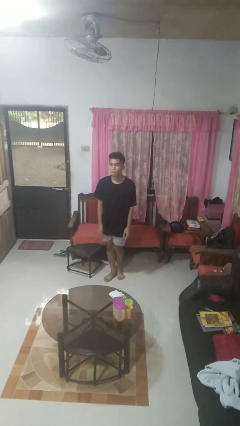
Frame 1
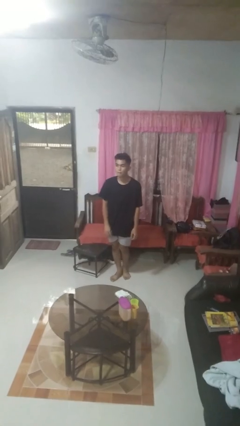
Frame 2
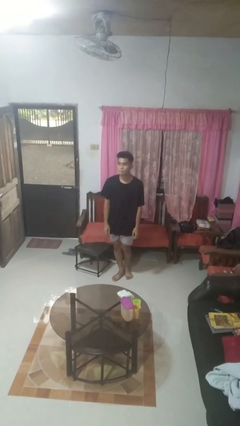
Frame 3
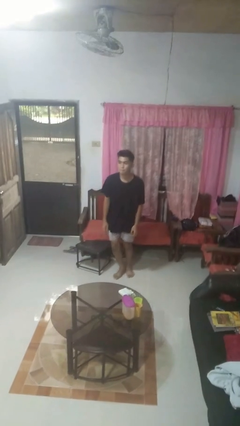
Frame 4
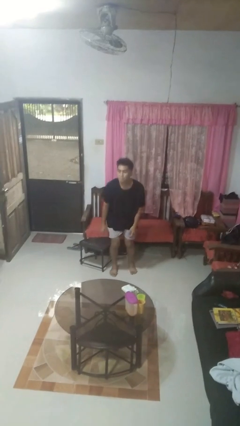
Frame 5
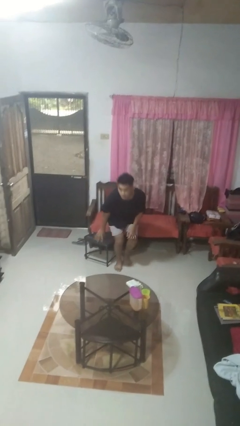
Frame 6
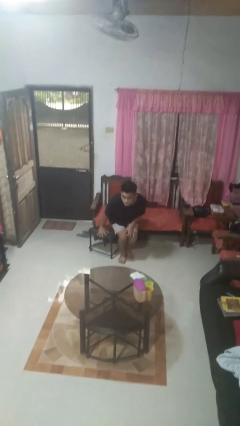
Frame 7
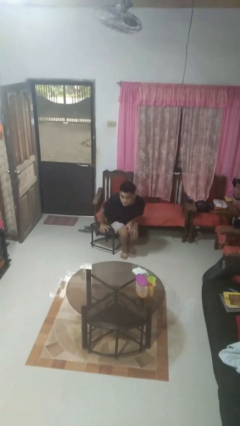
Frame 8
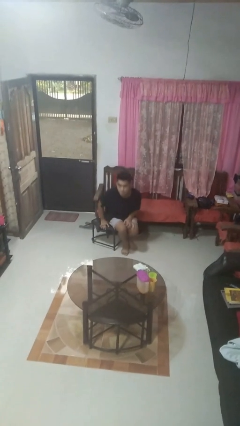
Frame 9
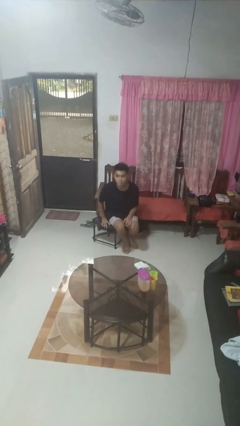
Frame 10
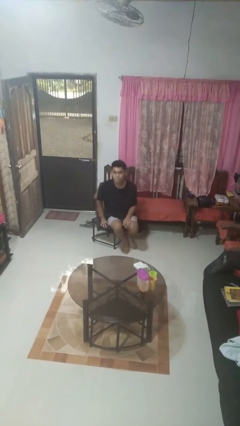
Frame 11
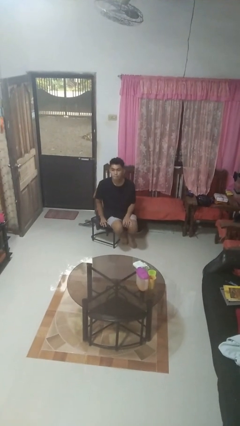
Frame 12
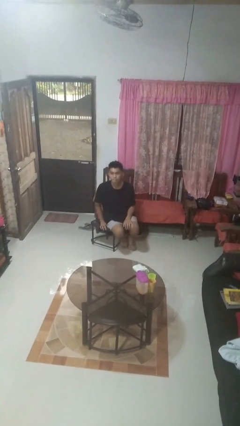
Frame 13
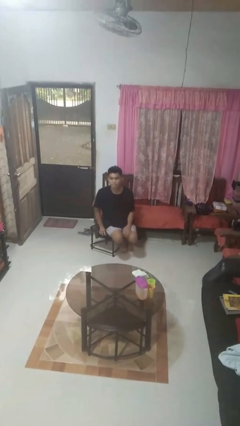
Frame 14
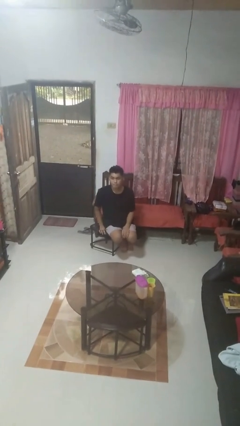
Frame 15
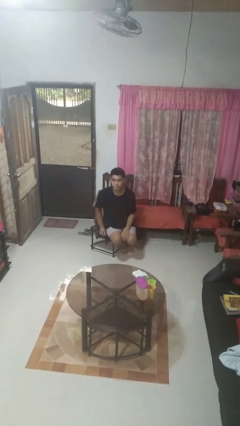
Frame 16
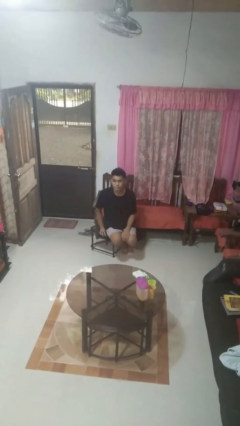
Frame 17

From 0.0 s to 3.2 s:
person sits down

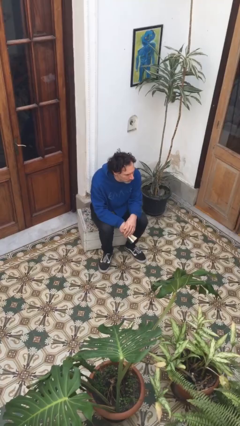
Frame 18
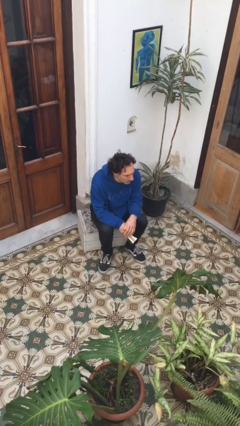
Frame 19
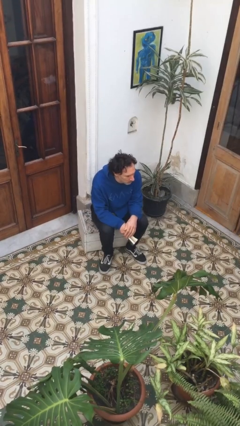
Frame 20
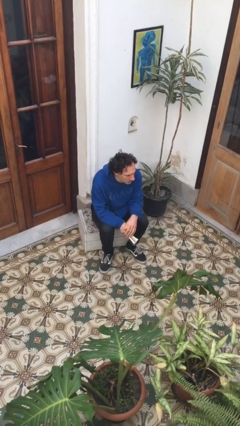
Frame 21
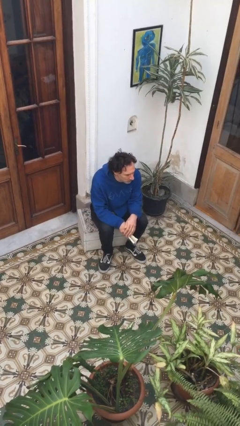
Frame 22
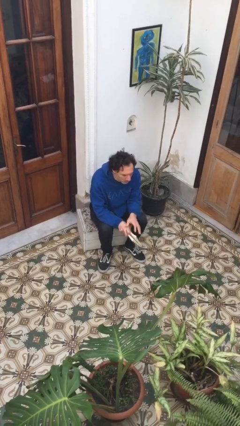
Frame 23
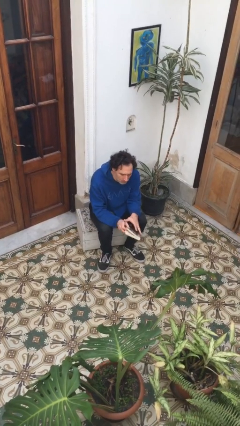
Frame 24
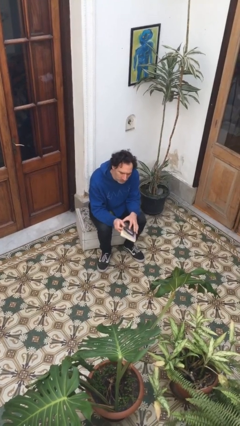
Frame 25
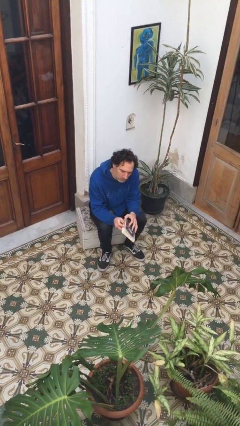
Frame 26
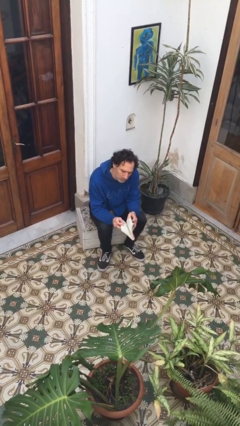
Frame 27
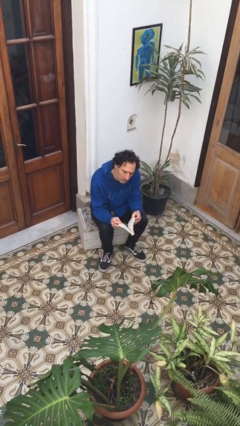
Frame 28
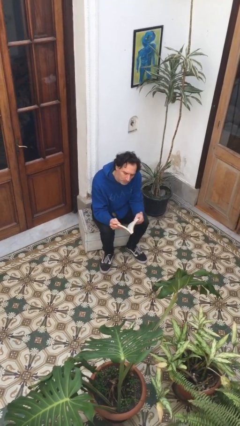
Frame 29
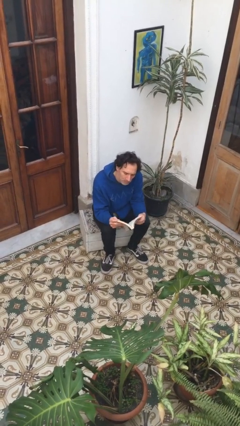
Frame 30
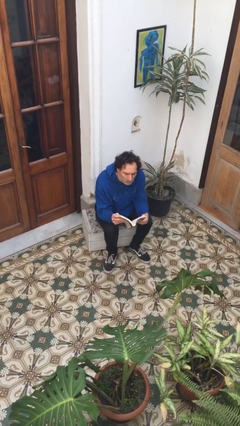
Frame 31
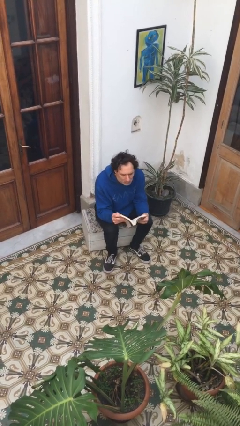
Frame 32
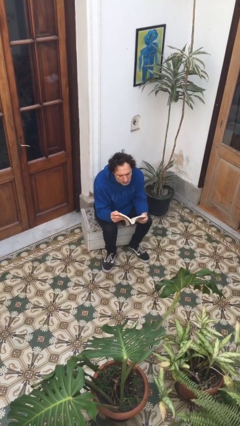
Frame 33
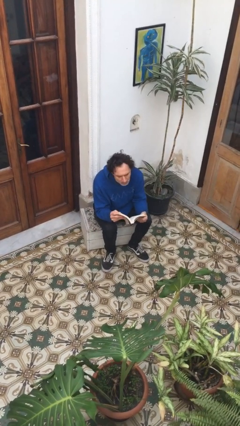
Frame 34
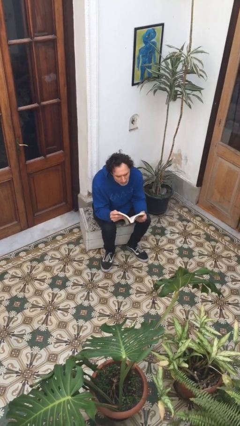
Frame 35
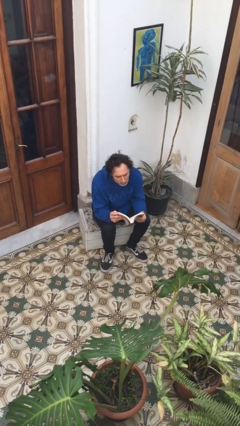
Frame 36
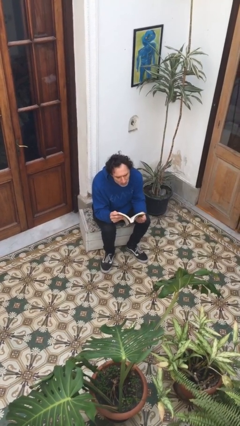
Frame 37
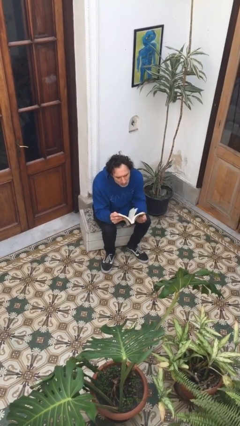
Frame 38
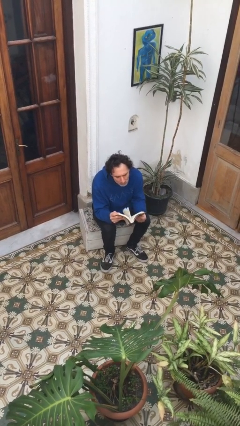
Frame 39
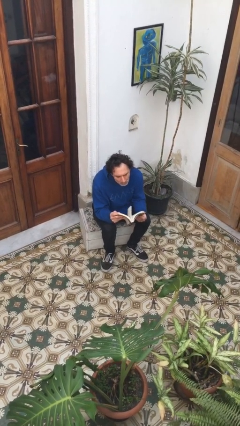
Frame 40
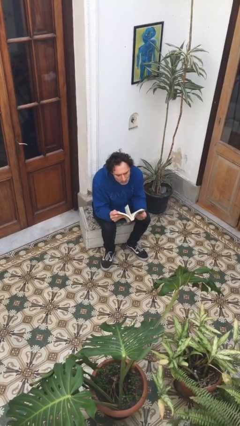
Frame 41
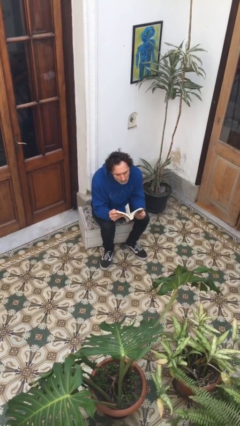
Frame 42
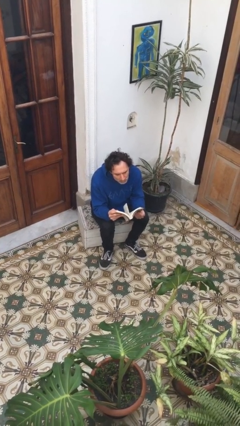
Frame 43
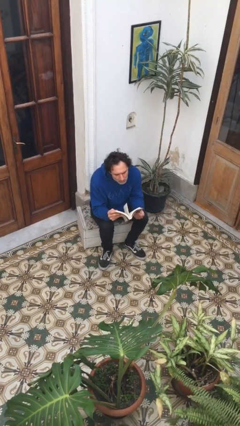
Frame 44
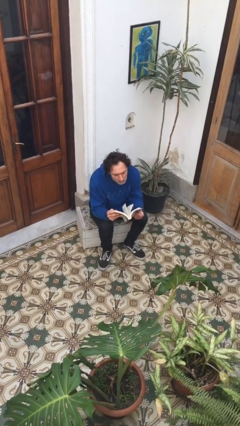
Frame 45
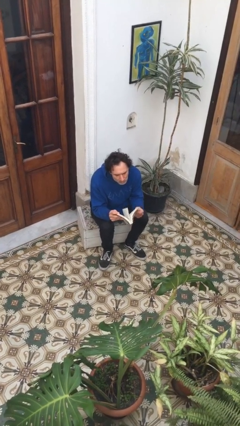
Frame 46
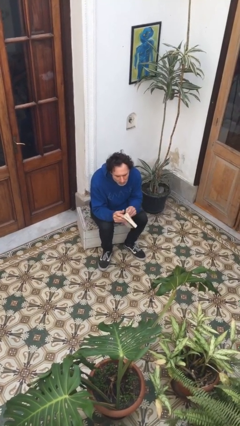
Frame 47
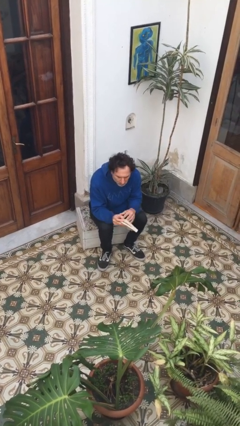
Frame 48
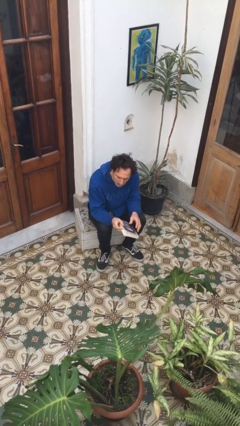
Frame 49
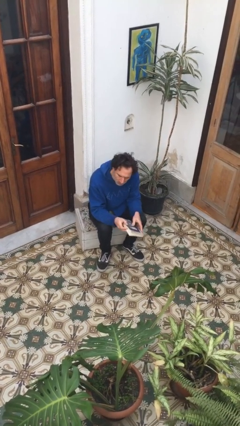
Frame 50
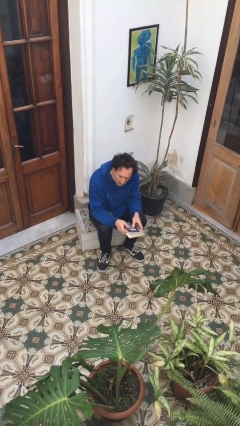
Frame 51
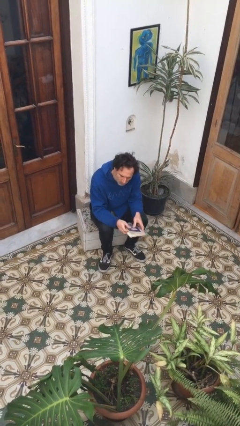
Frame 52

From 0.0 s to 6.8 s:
person reads book

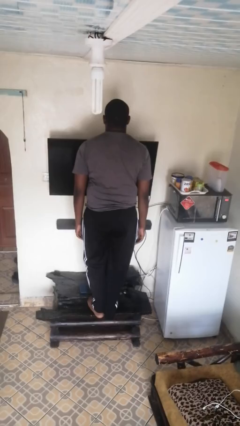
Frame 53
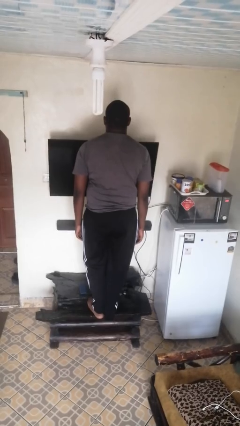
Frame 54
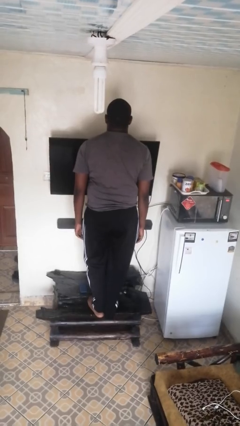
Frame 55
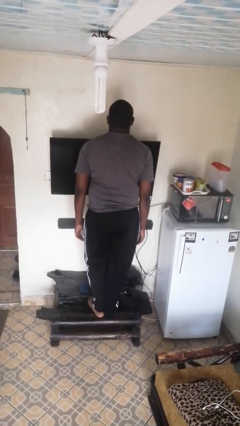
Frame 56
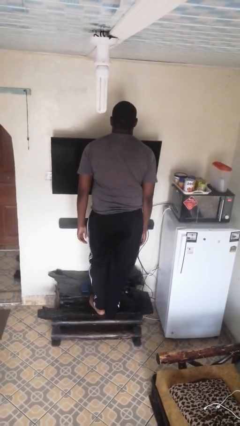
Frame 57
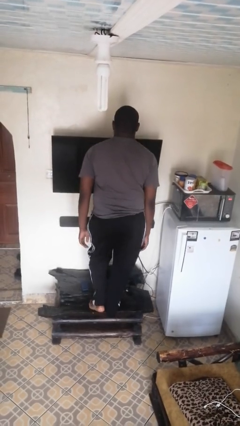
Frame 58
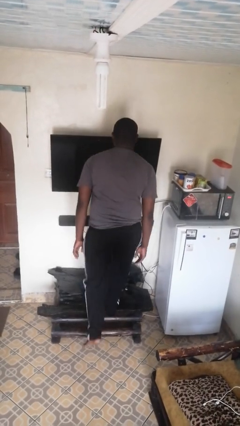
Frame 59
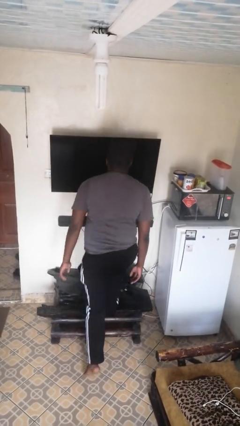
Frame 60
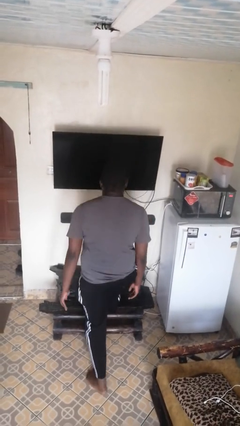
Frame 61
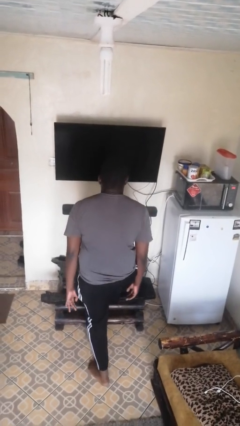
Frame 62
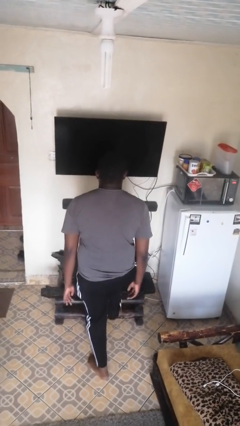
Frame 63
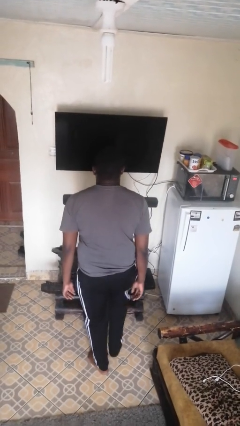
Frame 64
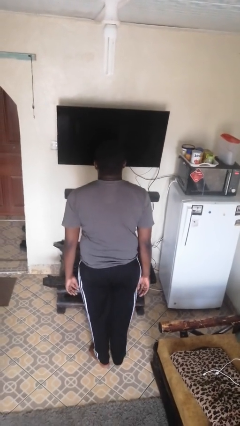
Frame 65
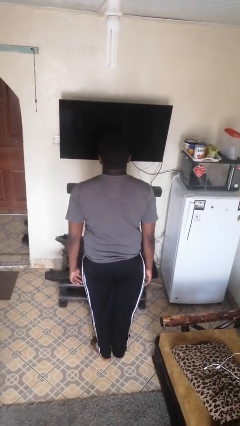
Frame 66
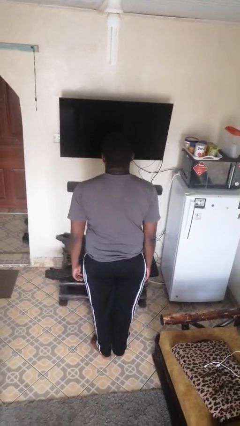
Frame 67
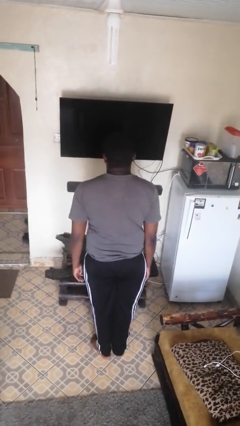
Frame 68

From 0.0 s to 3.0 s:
person climbs off table

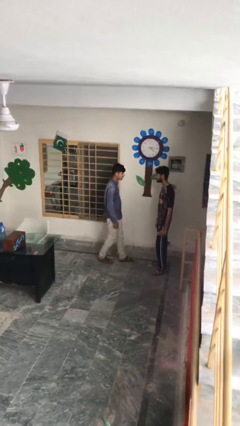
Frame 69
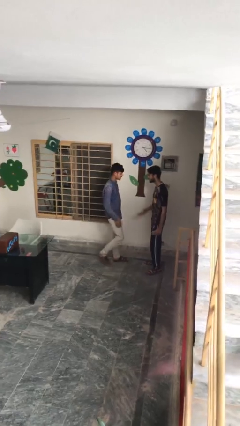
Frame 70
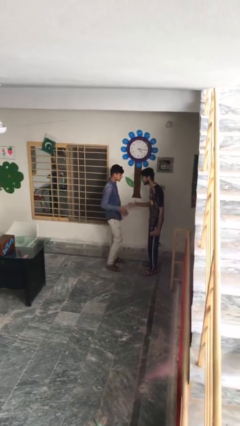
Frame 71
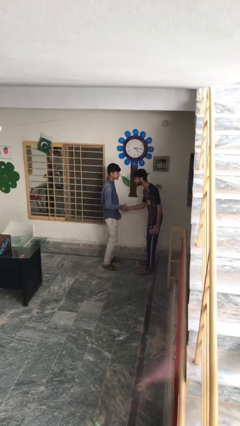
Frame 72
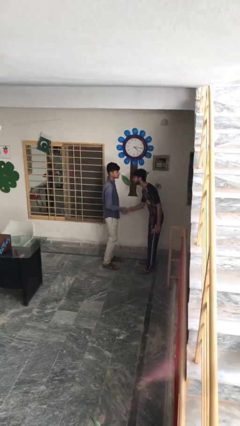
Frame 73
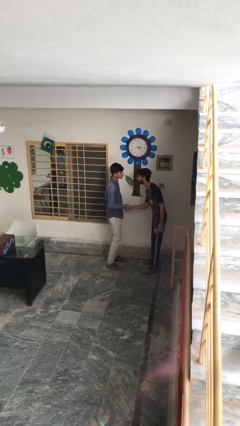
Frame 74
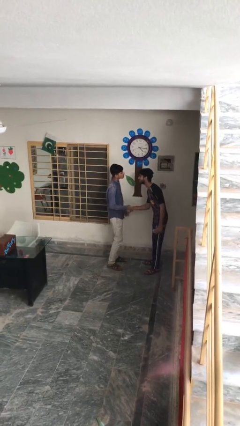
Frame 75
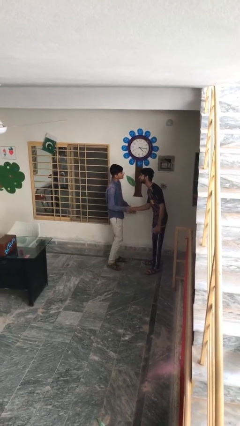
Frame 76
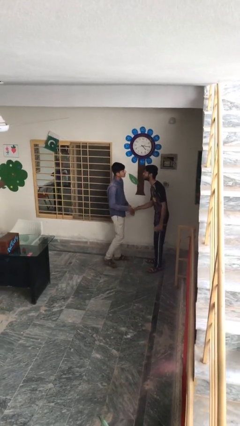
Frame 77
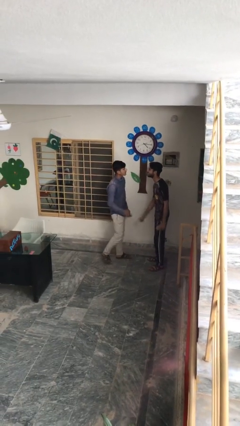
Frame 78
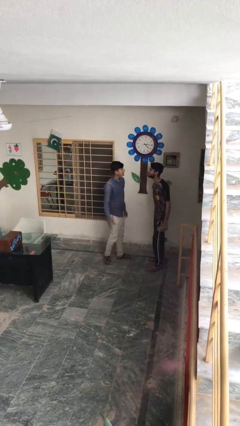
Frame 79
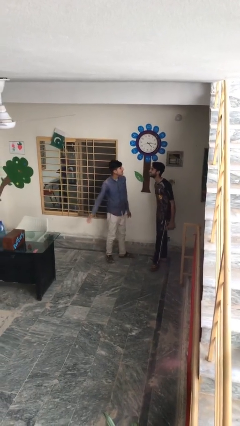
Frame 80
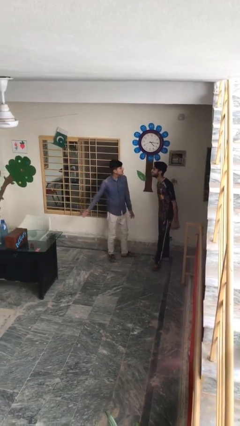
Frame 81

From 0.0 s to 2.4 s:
person shakes hand

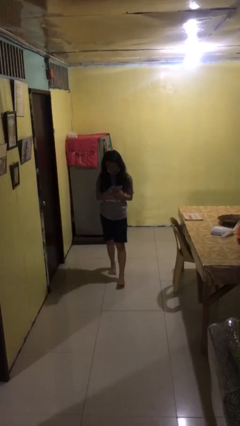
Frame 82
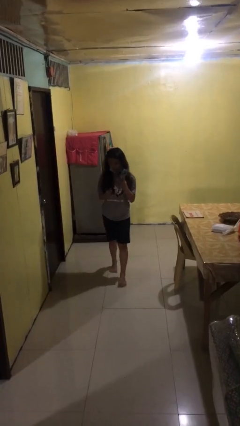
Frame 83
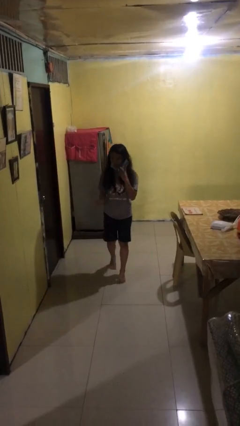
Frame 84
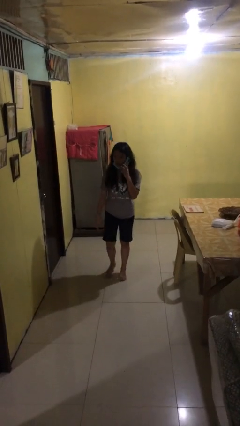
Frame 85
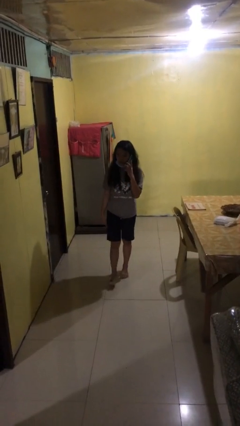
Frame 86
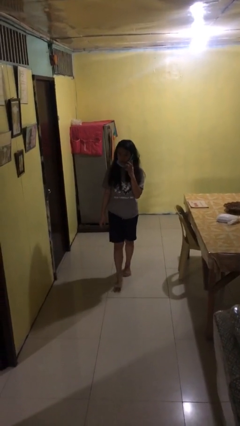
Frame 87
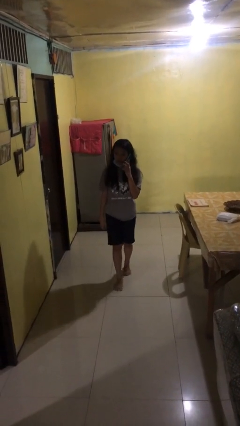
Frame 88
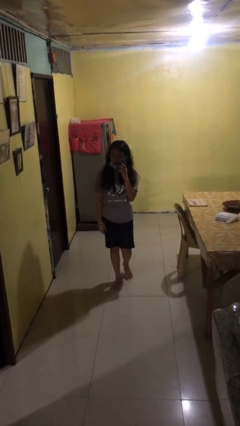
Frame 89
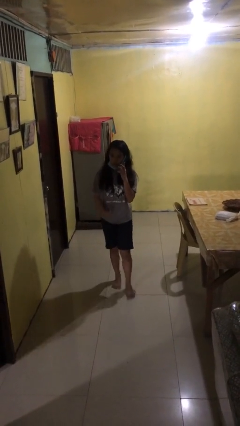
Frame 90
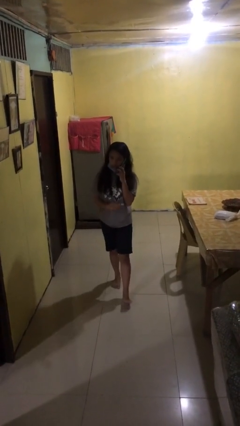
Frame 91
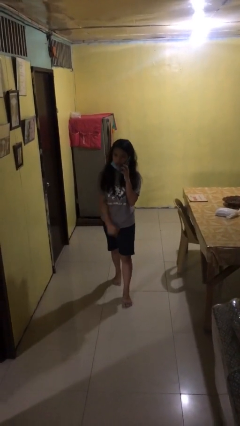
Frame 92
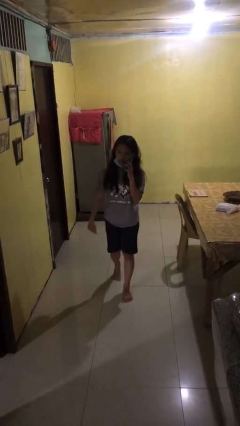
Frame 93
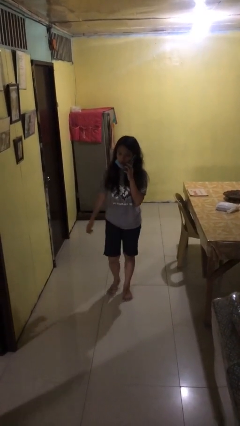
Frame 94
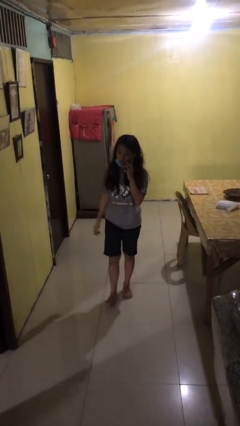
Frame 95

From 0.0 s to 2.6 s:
person talks on phone
